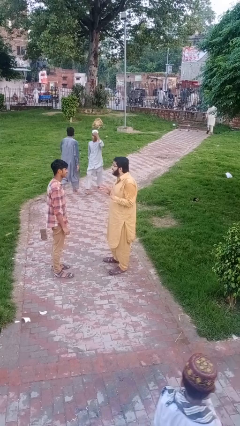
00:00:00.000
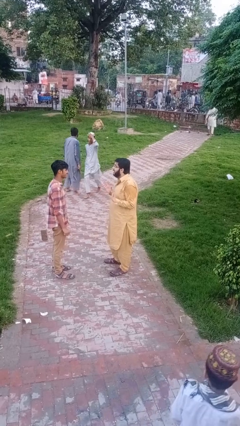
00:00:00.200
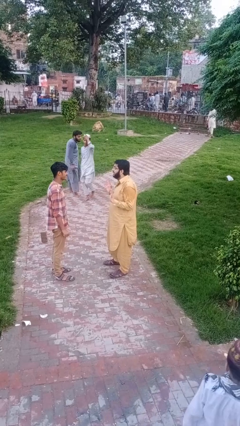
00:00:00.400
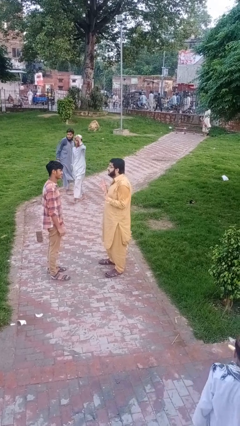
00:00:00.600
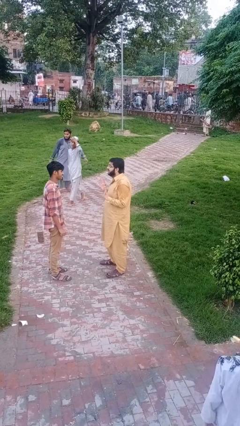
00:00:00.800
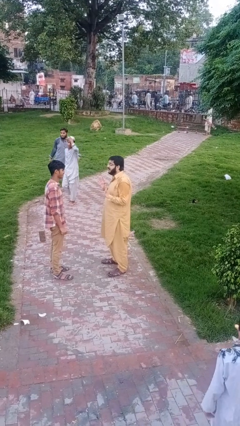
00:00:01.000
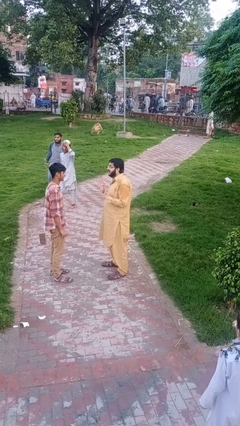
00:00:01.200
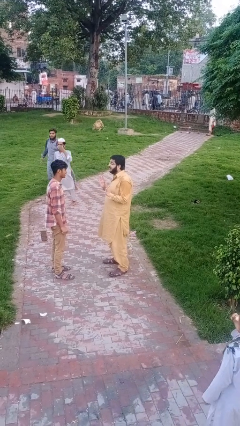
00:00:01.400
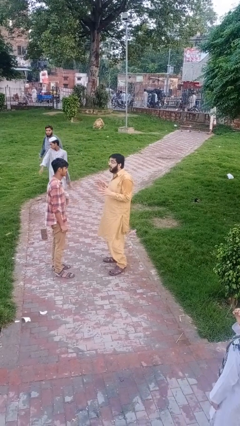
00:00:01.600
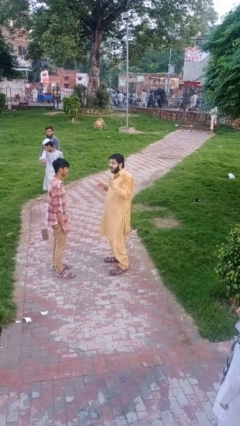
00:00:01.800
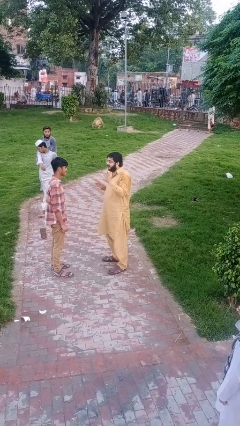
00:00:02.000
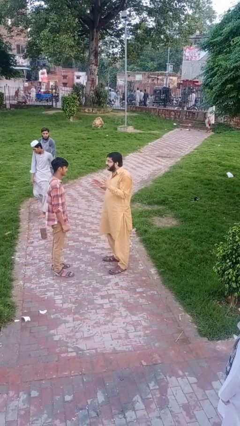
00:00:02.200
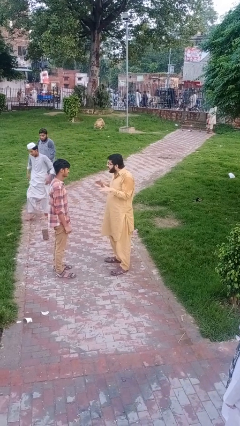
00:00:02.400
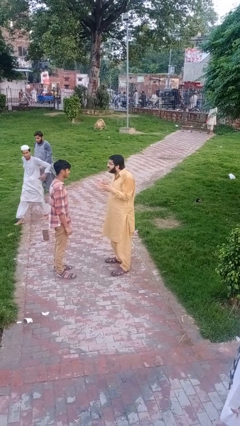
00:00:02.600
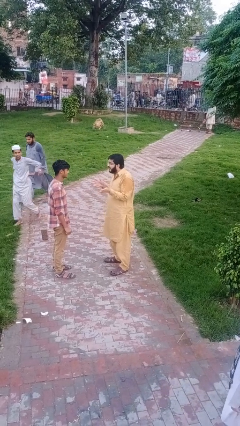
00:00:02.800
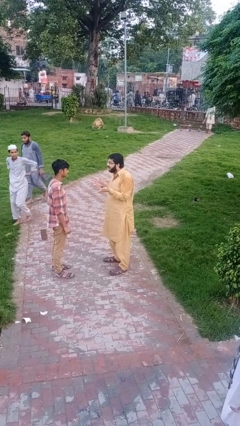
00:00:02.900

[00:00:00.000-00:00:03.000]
person talks to person

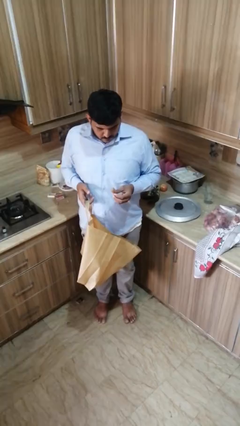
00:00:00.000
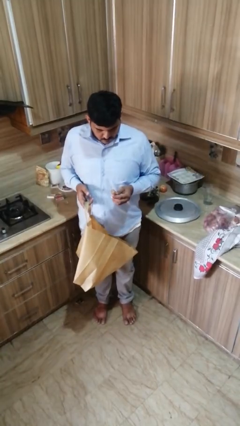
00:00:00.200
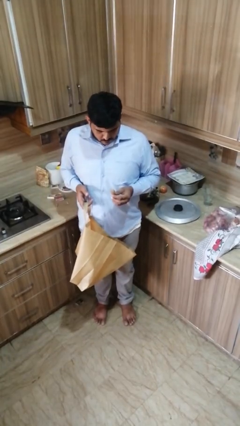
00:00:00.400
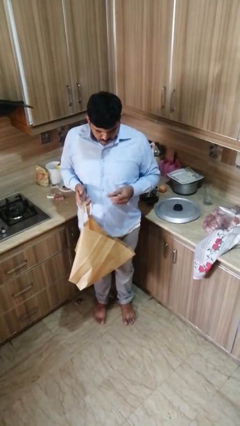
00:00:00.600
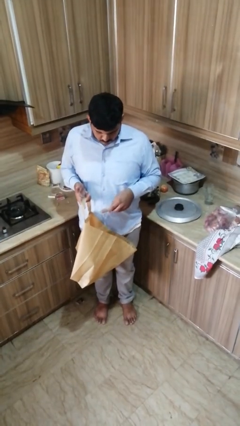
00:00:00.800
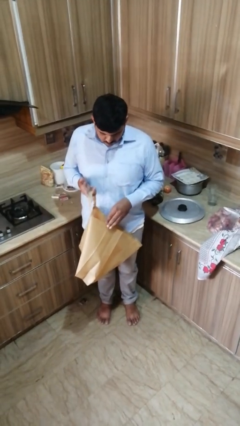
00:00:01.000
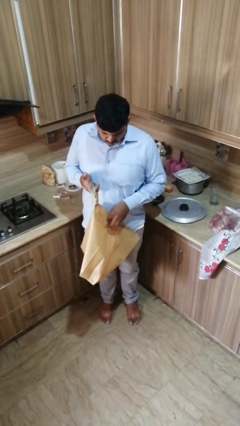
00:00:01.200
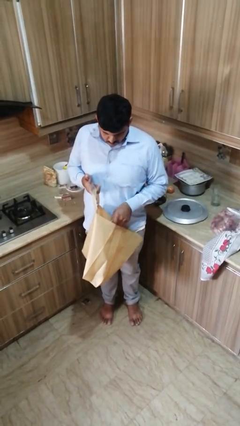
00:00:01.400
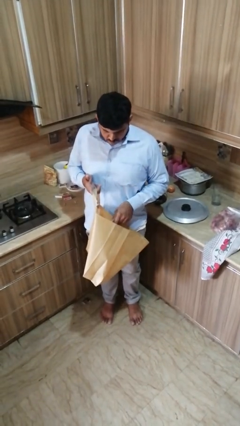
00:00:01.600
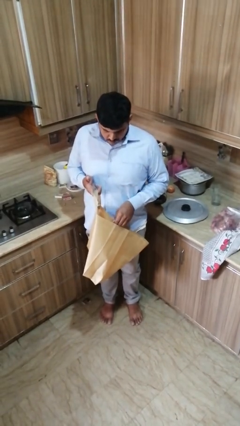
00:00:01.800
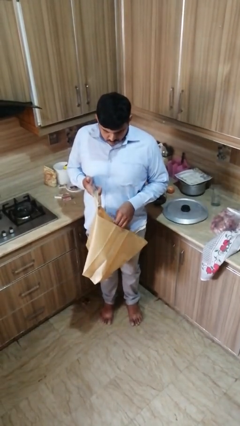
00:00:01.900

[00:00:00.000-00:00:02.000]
person puts object into bag

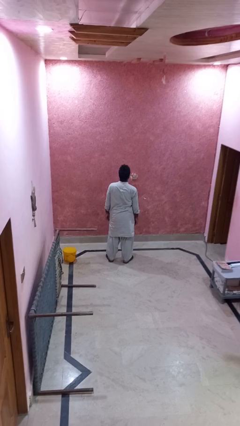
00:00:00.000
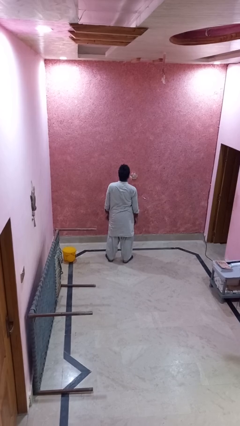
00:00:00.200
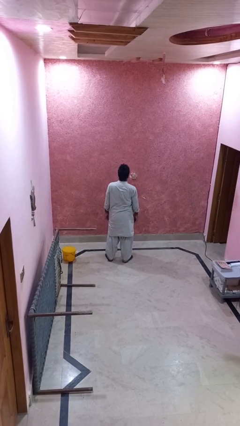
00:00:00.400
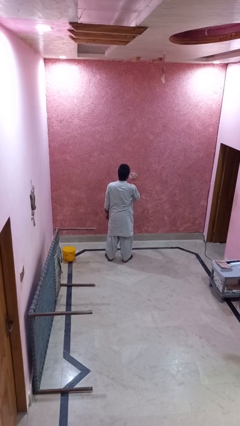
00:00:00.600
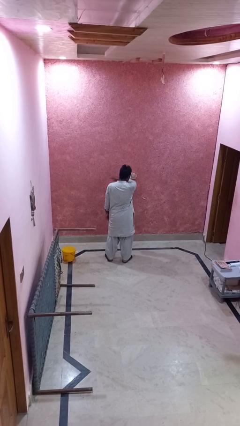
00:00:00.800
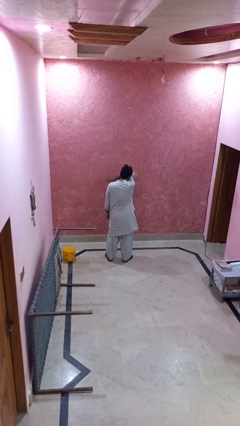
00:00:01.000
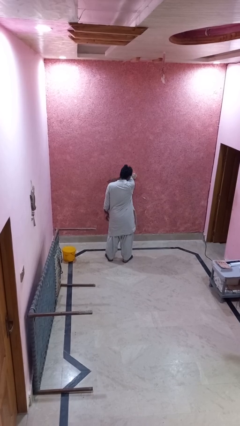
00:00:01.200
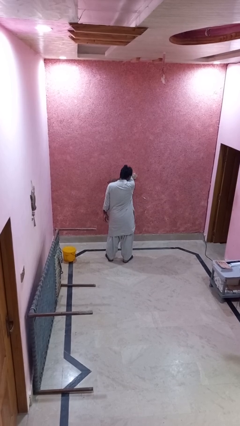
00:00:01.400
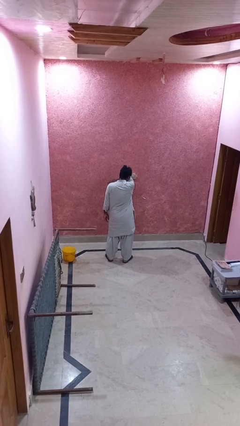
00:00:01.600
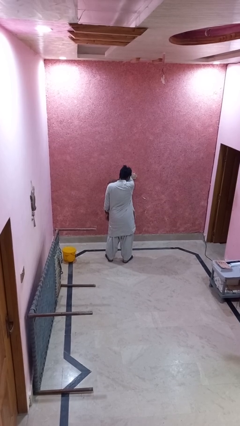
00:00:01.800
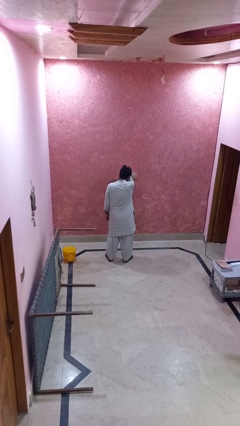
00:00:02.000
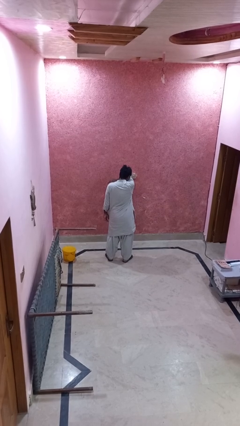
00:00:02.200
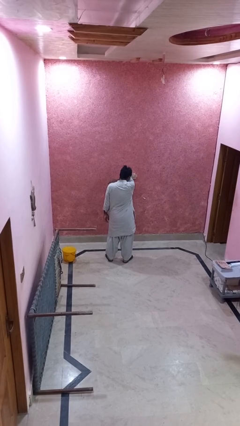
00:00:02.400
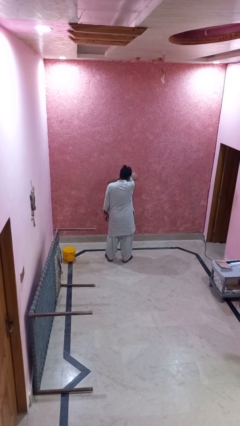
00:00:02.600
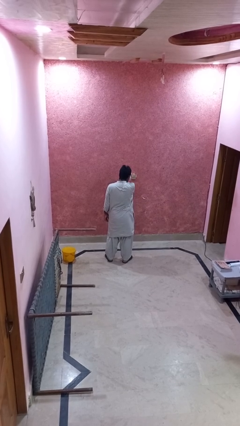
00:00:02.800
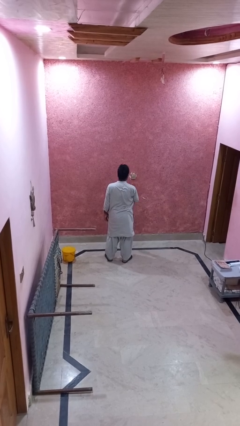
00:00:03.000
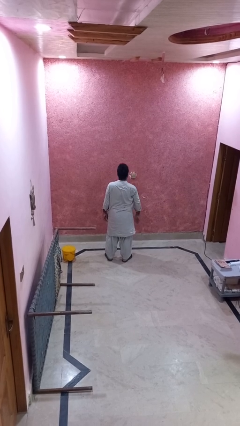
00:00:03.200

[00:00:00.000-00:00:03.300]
person sneezes into arm

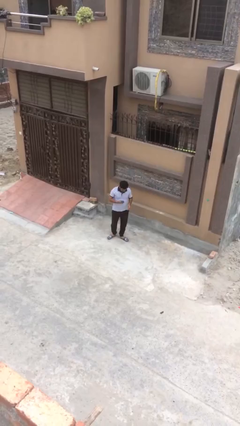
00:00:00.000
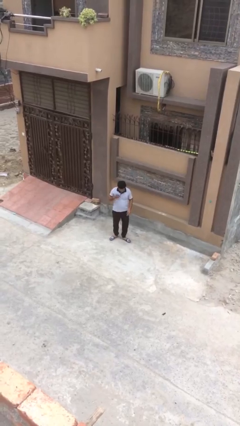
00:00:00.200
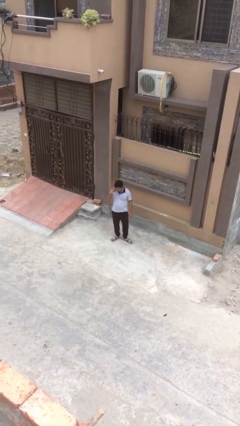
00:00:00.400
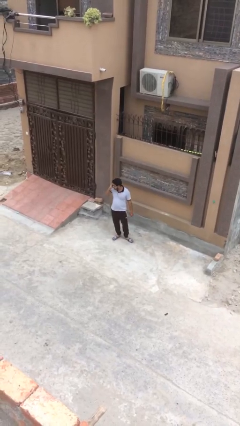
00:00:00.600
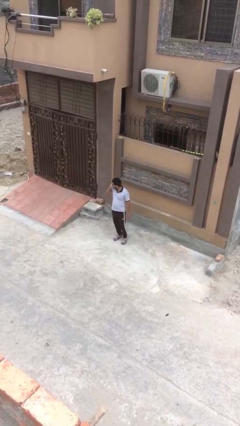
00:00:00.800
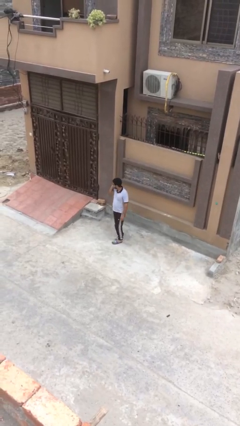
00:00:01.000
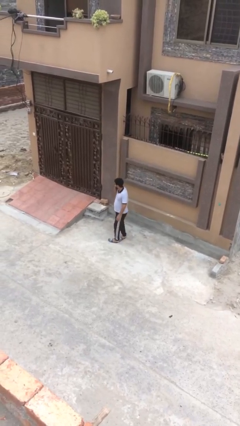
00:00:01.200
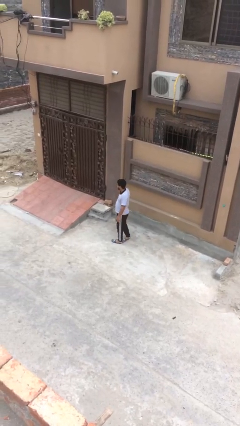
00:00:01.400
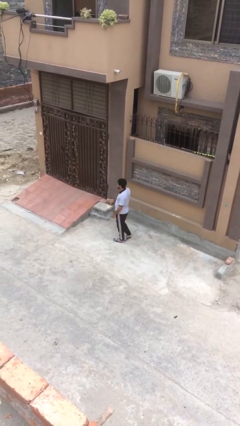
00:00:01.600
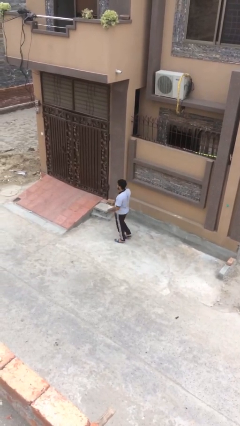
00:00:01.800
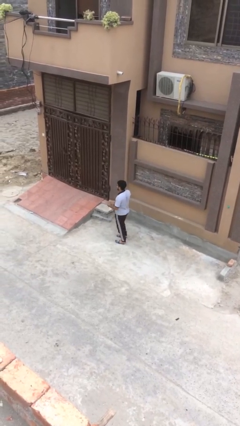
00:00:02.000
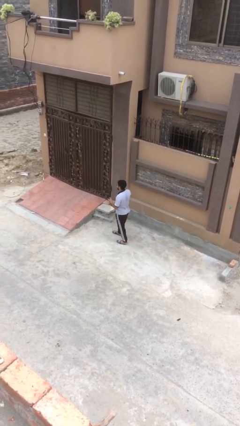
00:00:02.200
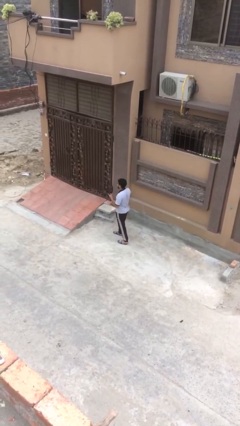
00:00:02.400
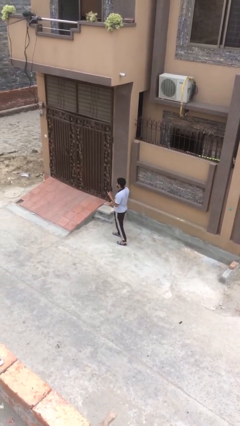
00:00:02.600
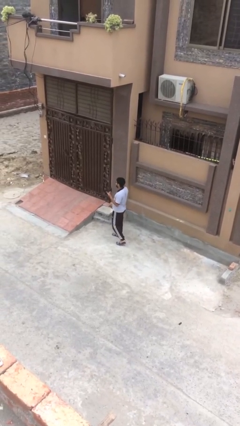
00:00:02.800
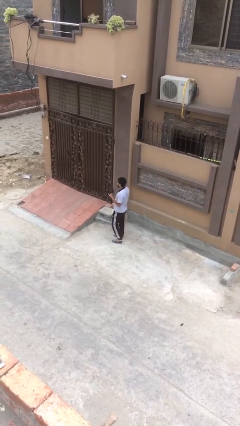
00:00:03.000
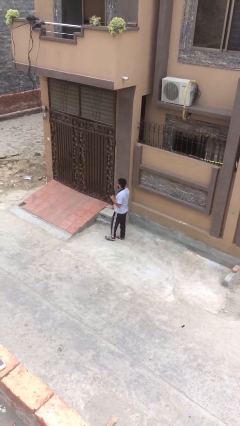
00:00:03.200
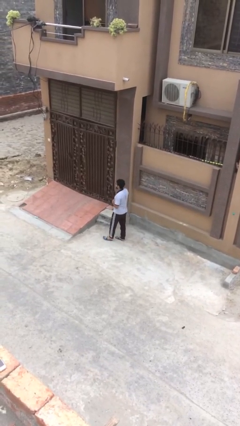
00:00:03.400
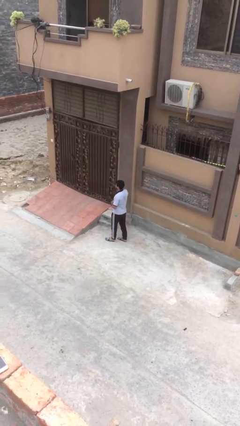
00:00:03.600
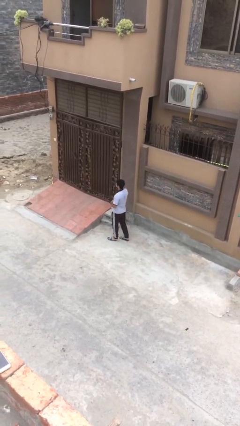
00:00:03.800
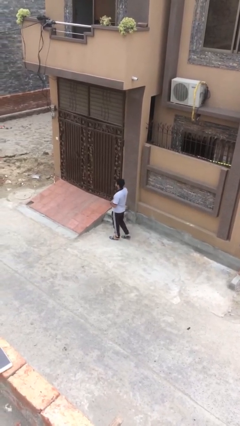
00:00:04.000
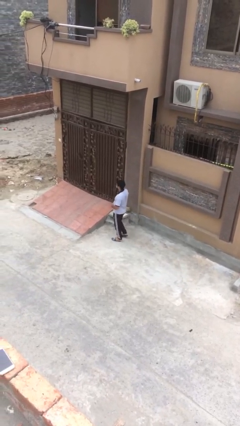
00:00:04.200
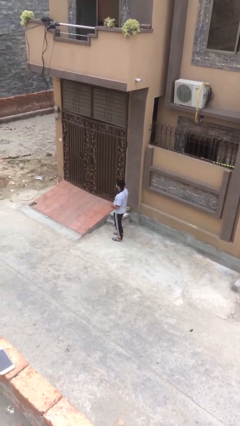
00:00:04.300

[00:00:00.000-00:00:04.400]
person talks on phone

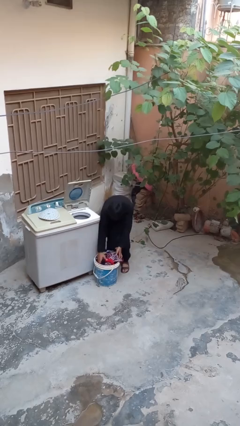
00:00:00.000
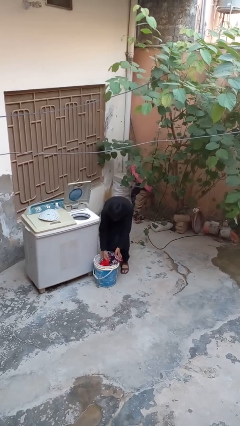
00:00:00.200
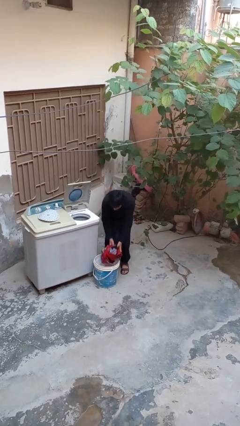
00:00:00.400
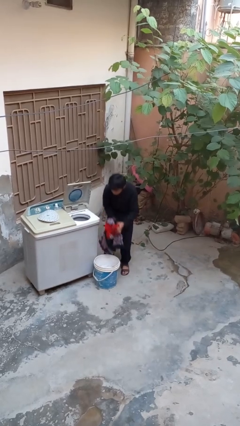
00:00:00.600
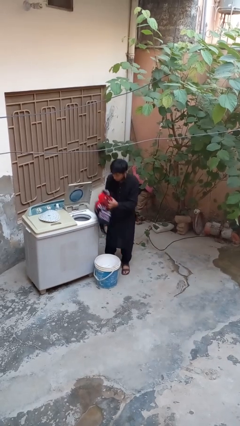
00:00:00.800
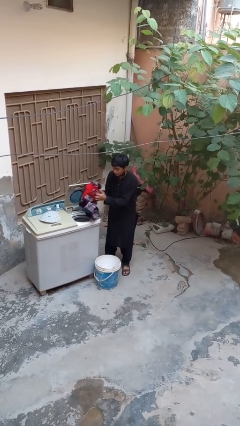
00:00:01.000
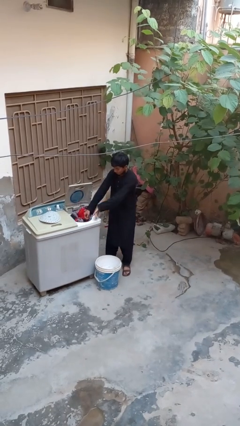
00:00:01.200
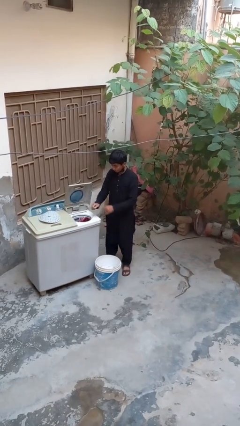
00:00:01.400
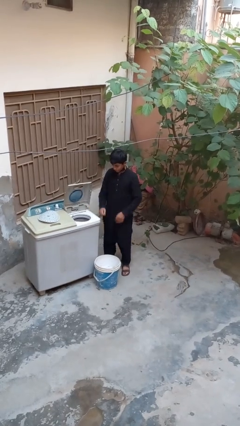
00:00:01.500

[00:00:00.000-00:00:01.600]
person loads dryer

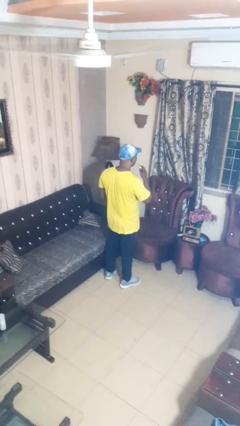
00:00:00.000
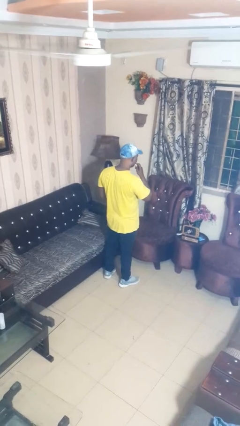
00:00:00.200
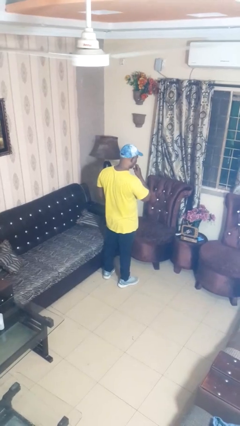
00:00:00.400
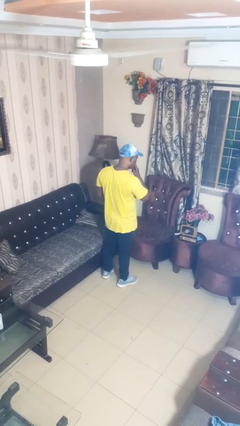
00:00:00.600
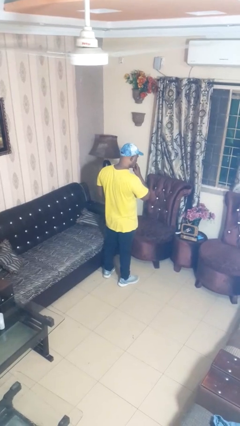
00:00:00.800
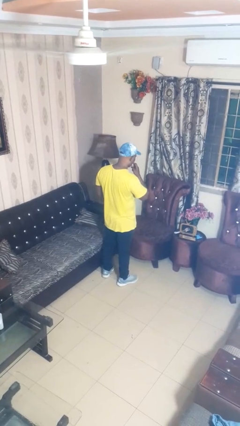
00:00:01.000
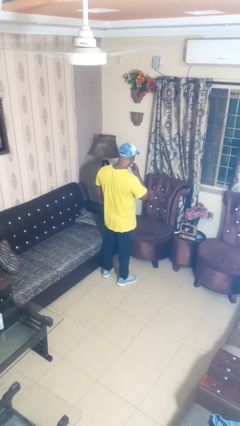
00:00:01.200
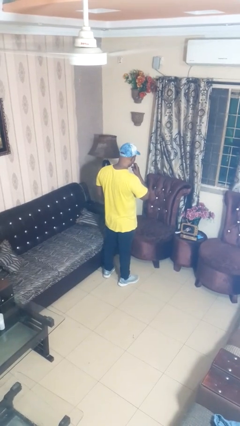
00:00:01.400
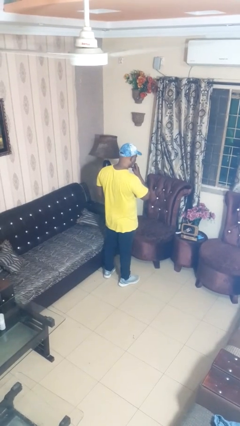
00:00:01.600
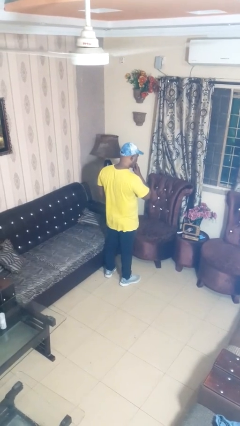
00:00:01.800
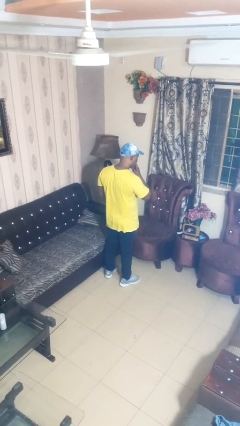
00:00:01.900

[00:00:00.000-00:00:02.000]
person applies lip makeup

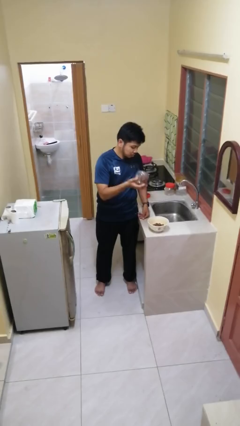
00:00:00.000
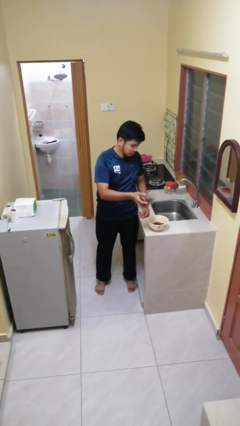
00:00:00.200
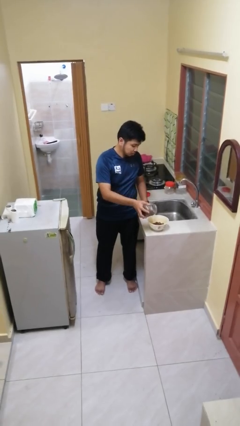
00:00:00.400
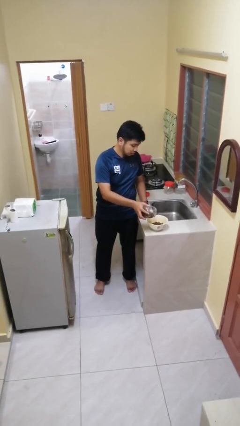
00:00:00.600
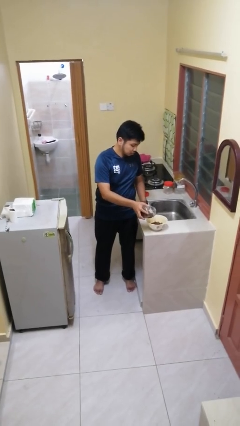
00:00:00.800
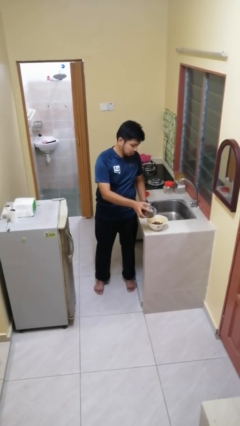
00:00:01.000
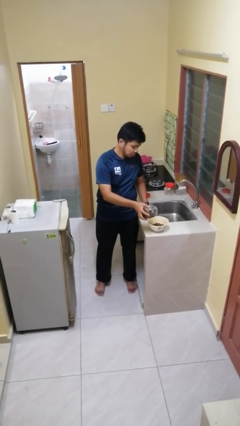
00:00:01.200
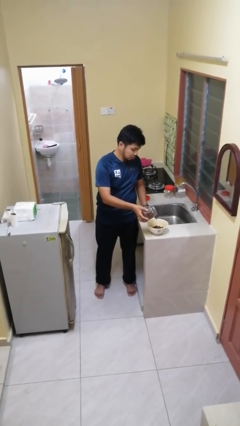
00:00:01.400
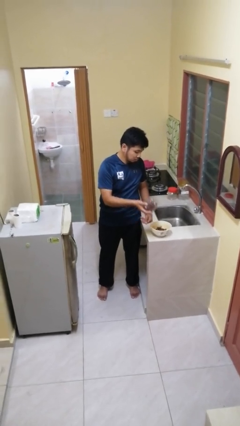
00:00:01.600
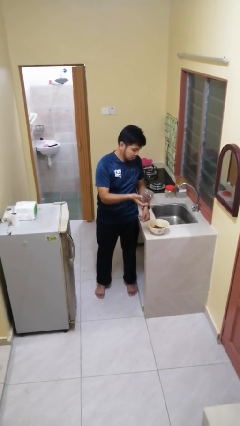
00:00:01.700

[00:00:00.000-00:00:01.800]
person pours into bowl
